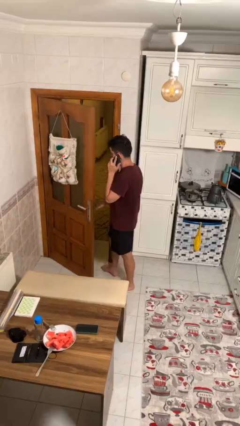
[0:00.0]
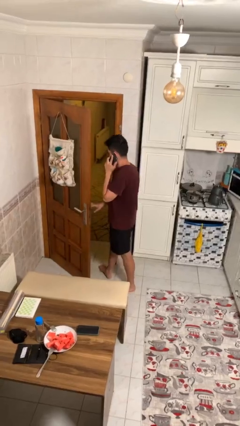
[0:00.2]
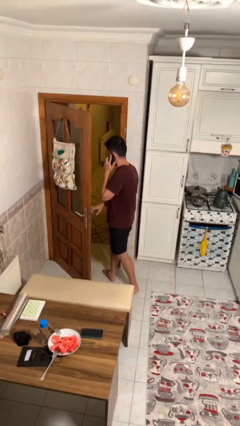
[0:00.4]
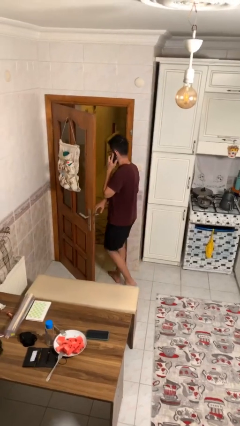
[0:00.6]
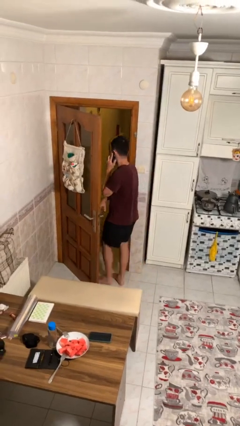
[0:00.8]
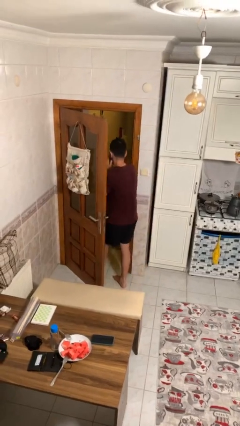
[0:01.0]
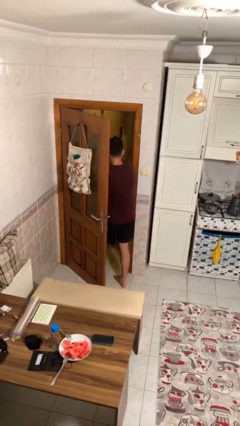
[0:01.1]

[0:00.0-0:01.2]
person exits scene through structure

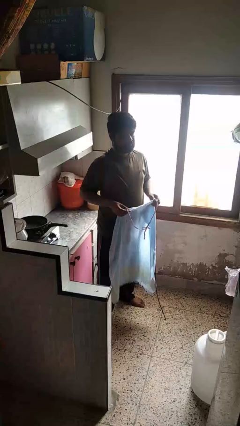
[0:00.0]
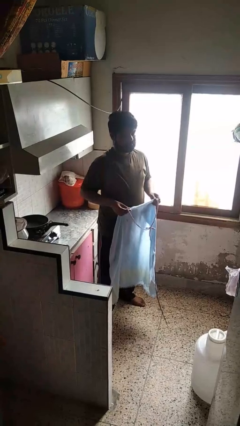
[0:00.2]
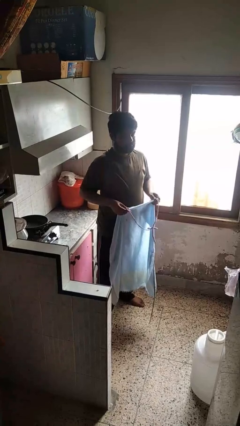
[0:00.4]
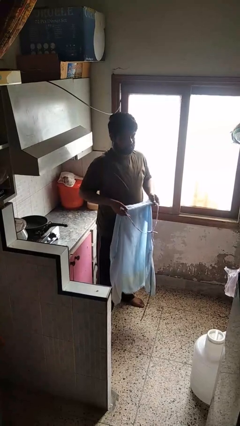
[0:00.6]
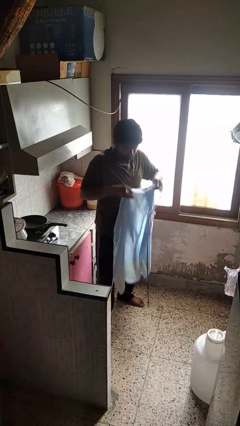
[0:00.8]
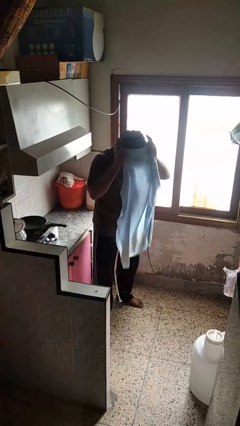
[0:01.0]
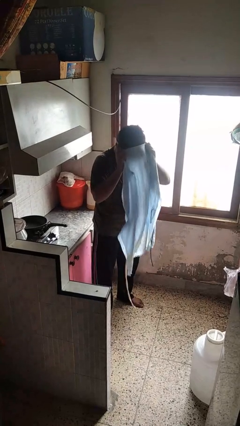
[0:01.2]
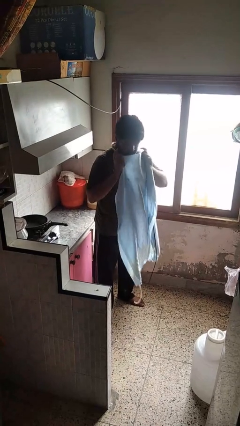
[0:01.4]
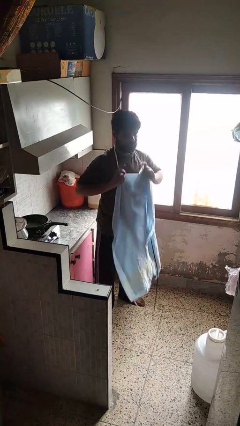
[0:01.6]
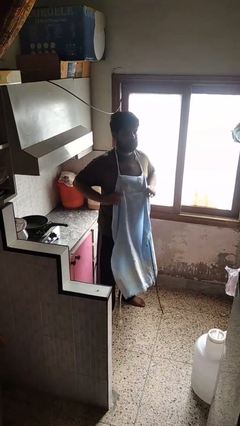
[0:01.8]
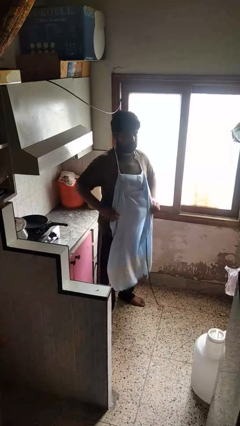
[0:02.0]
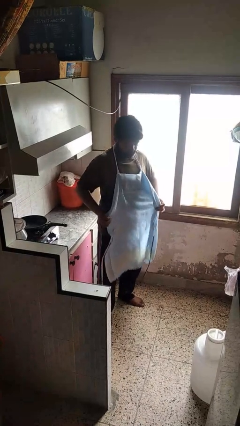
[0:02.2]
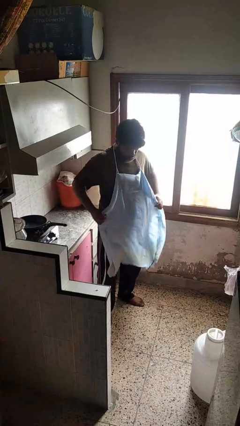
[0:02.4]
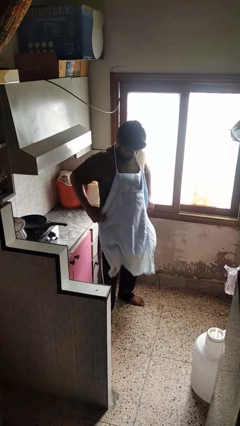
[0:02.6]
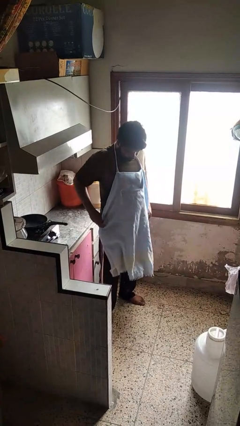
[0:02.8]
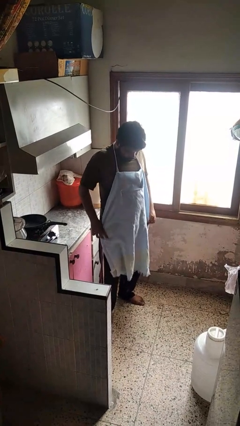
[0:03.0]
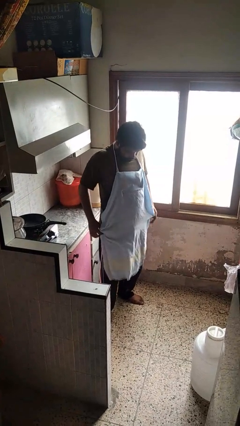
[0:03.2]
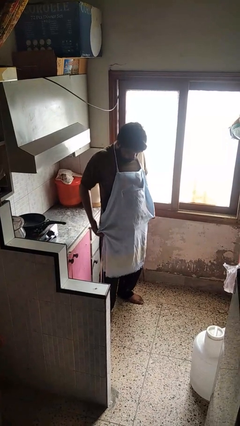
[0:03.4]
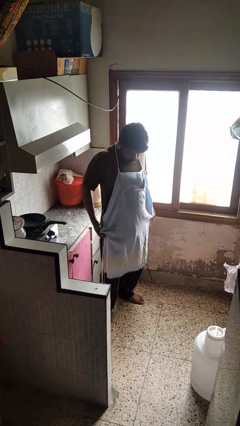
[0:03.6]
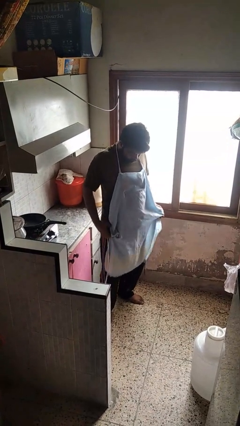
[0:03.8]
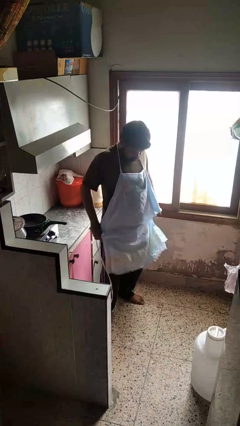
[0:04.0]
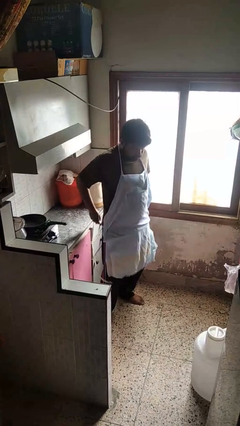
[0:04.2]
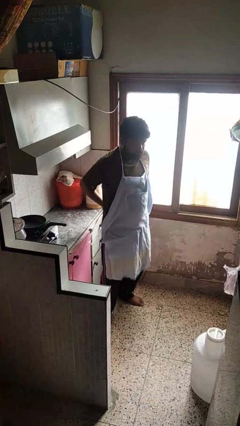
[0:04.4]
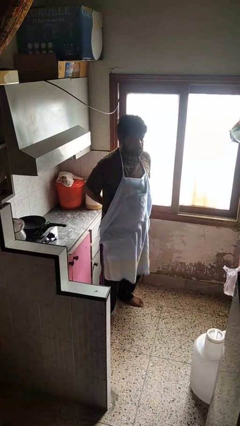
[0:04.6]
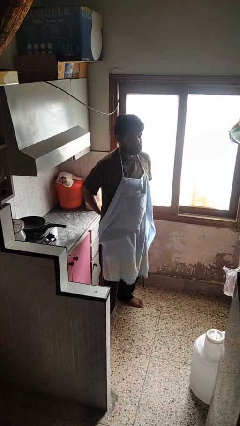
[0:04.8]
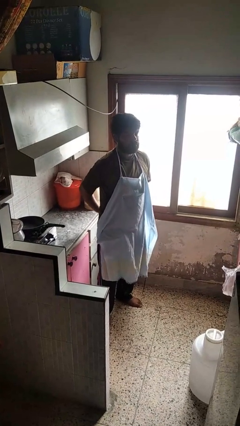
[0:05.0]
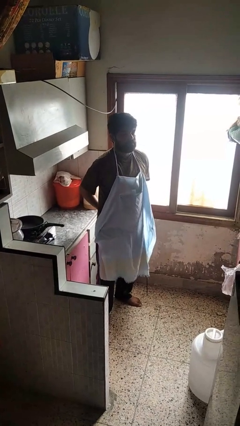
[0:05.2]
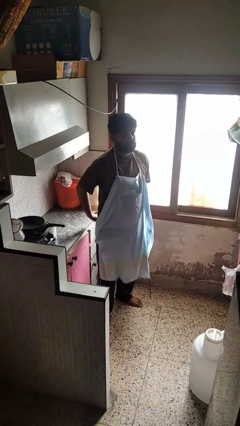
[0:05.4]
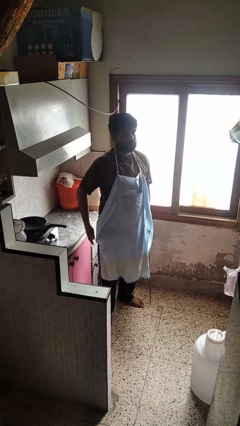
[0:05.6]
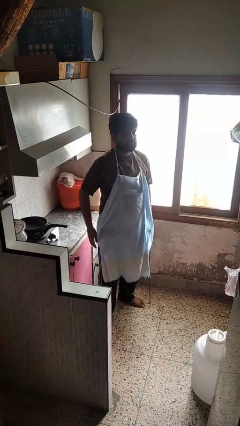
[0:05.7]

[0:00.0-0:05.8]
person puts on apron

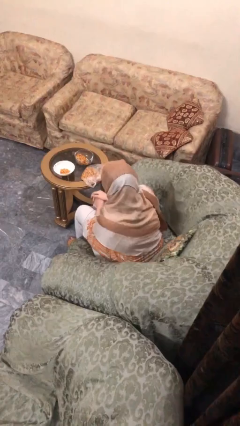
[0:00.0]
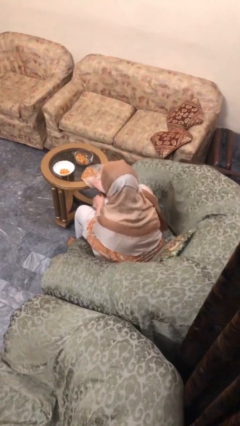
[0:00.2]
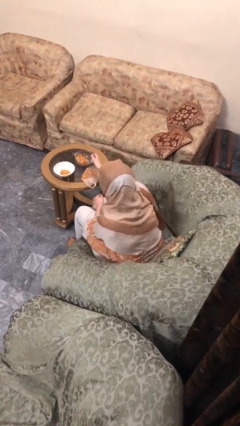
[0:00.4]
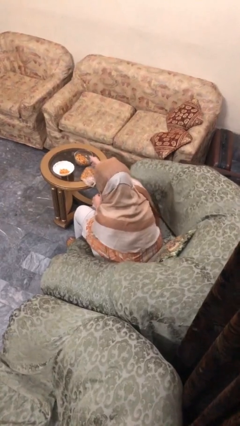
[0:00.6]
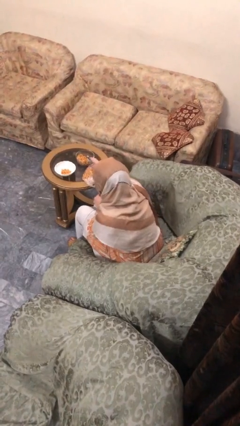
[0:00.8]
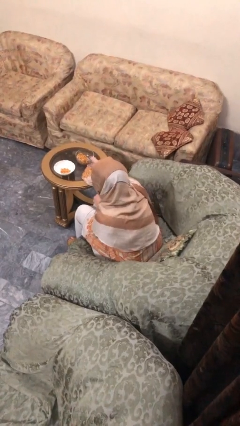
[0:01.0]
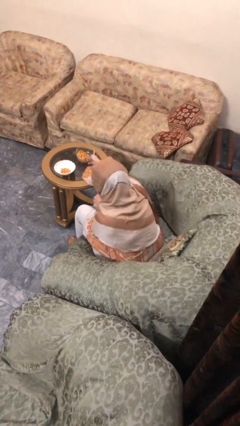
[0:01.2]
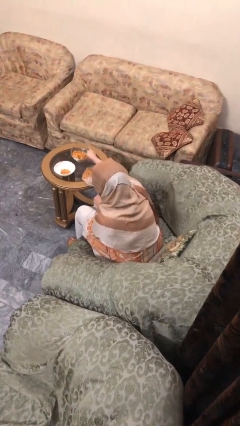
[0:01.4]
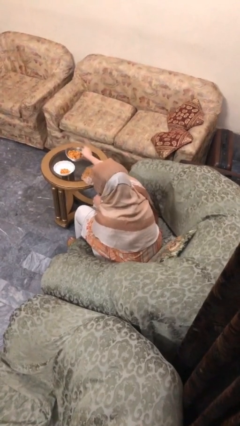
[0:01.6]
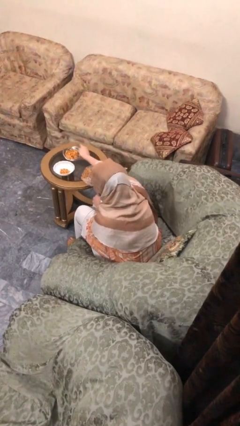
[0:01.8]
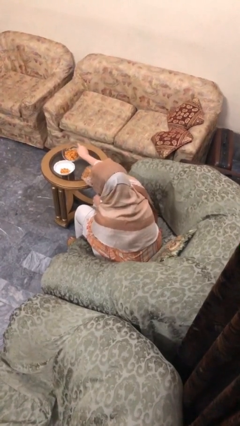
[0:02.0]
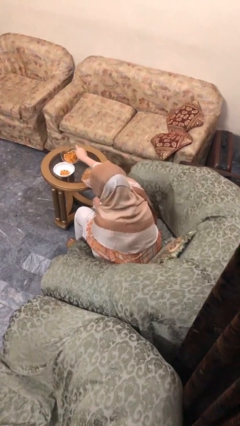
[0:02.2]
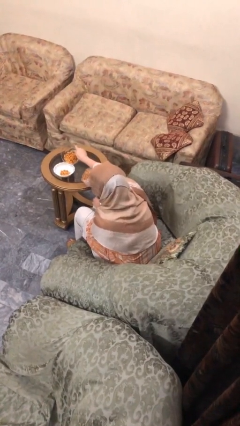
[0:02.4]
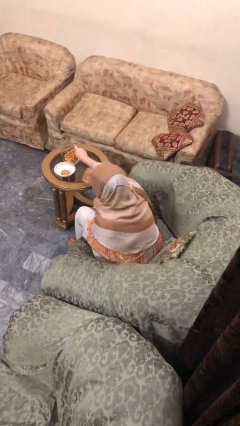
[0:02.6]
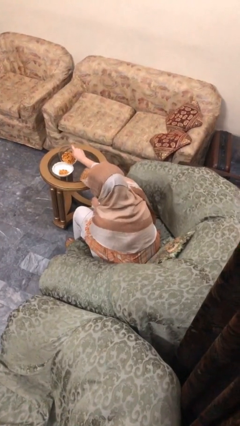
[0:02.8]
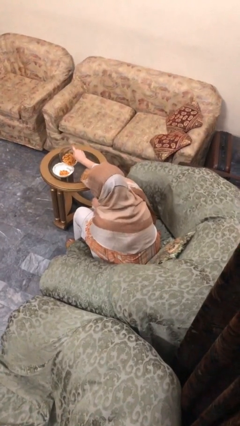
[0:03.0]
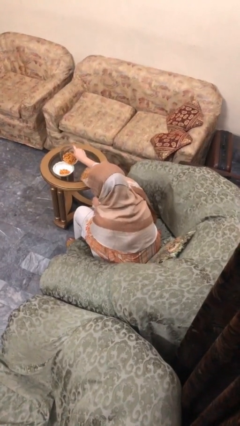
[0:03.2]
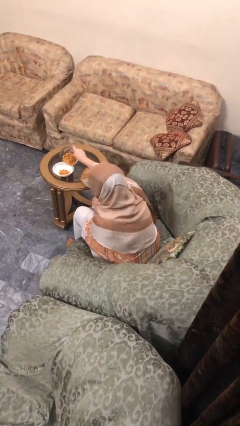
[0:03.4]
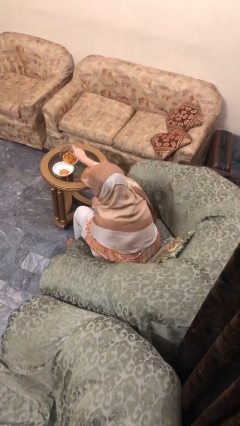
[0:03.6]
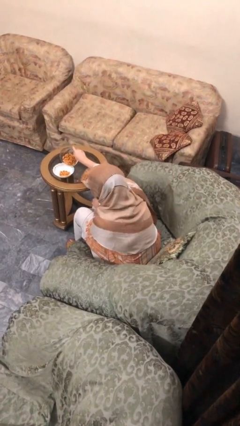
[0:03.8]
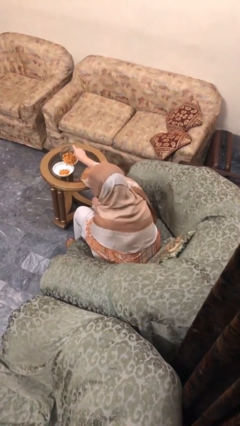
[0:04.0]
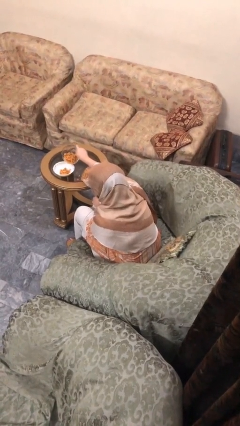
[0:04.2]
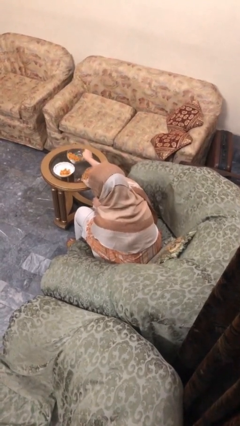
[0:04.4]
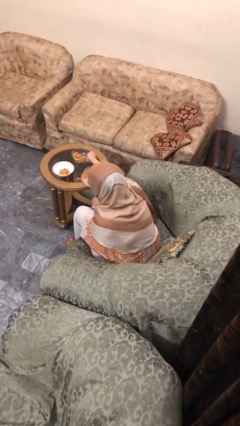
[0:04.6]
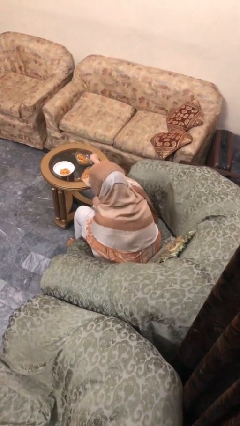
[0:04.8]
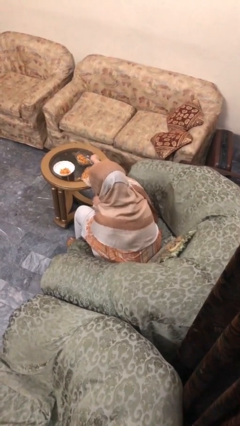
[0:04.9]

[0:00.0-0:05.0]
person pours into bowl

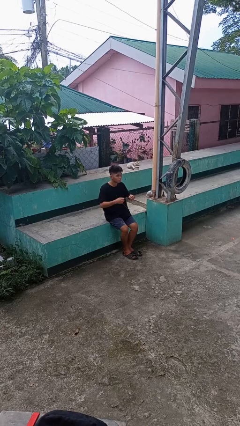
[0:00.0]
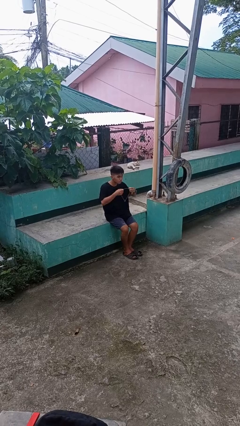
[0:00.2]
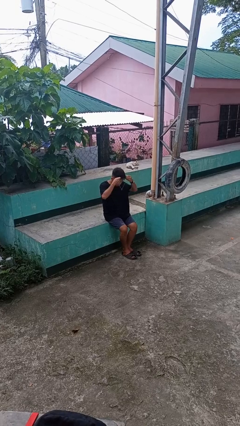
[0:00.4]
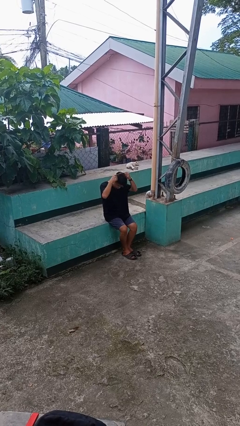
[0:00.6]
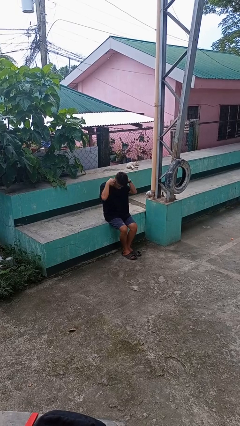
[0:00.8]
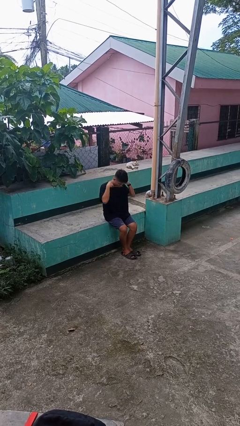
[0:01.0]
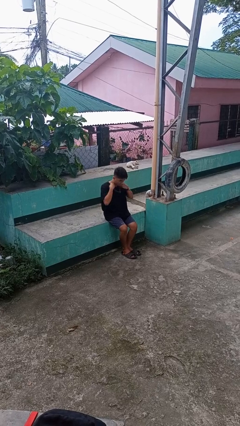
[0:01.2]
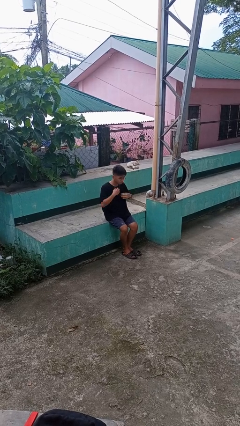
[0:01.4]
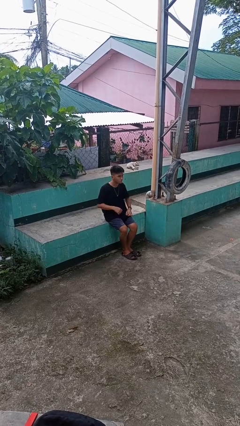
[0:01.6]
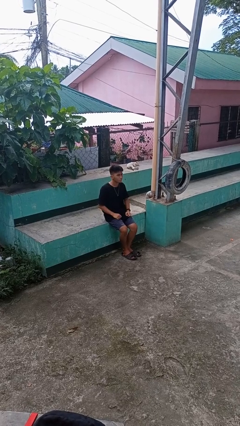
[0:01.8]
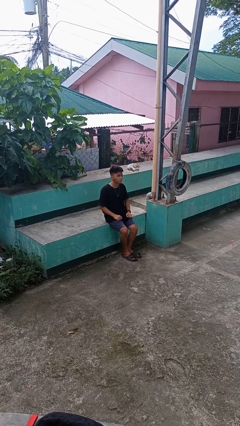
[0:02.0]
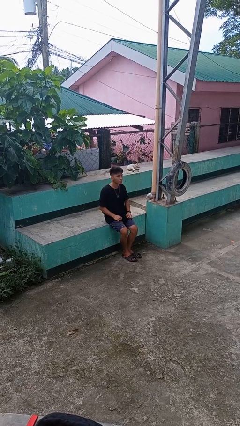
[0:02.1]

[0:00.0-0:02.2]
person puts on necklace

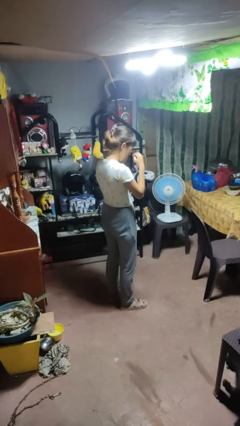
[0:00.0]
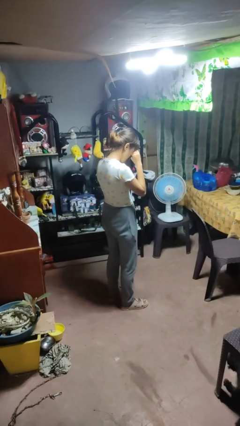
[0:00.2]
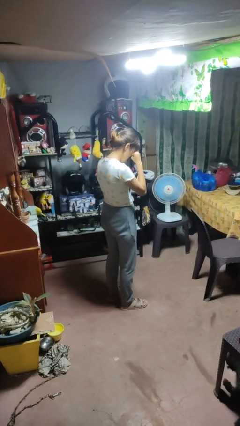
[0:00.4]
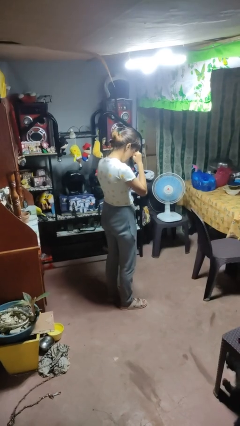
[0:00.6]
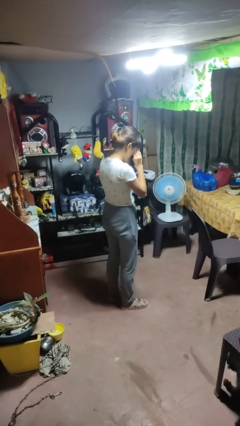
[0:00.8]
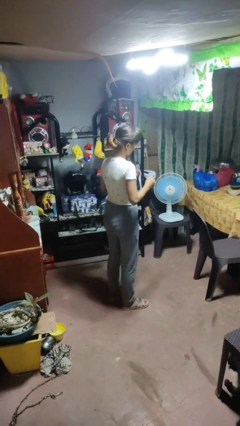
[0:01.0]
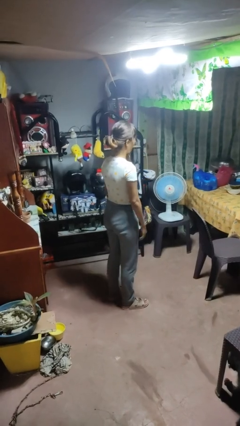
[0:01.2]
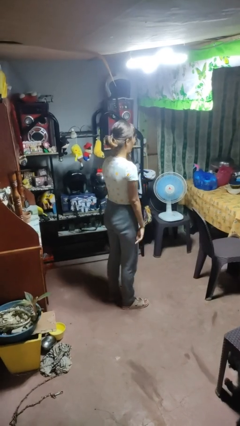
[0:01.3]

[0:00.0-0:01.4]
person rubs eyes

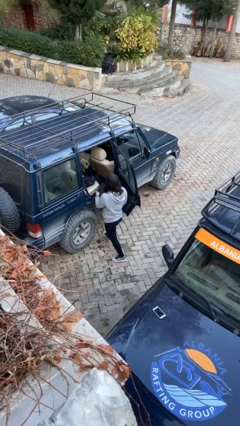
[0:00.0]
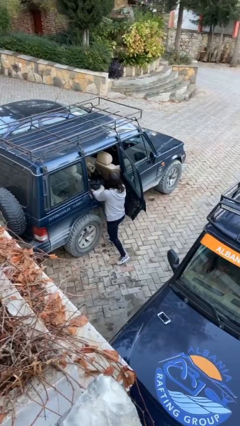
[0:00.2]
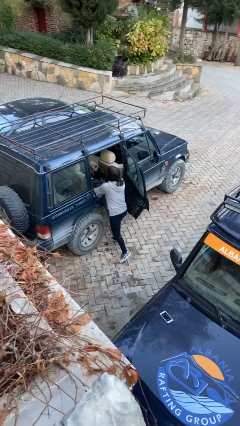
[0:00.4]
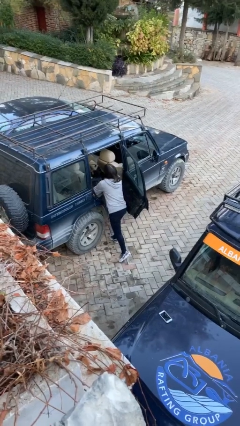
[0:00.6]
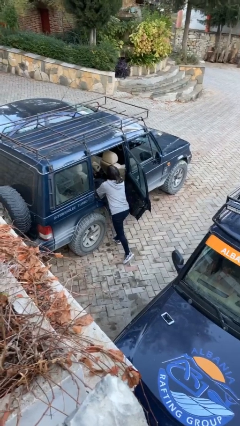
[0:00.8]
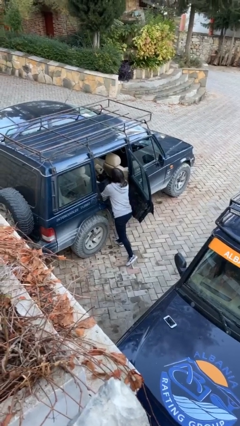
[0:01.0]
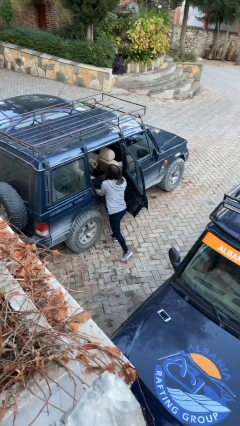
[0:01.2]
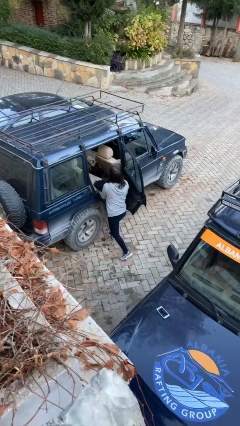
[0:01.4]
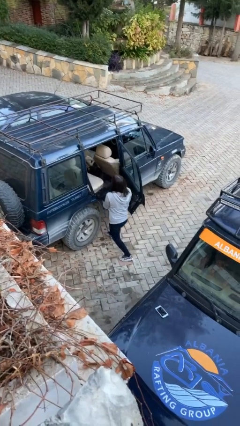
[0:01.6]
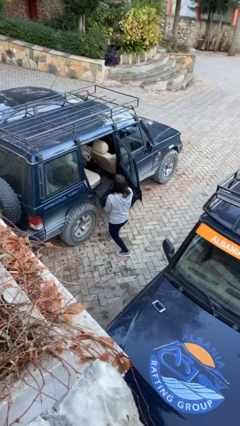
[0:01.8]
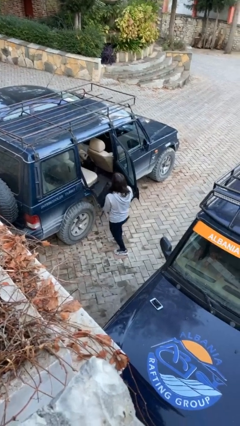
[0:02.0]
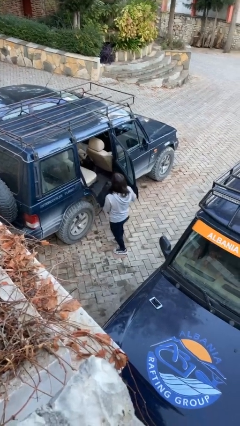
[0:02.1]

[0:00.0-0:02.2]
person unloads car
